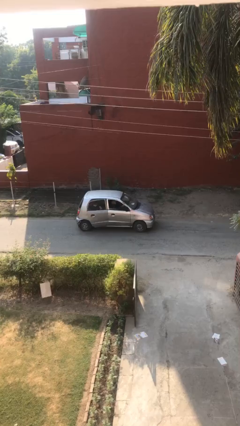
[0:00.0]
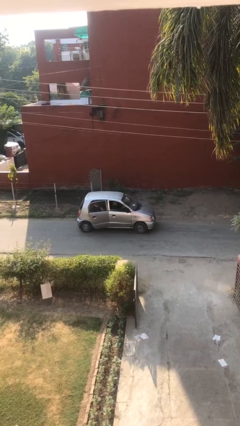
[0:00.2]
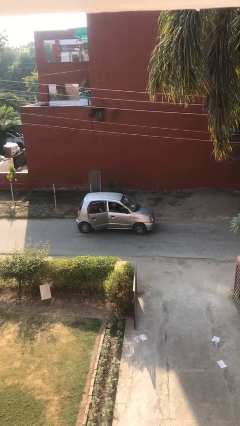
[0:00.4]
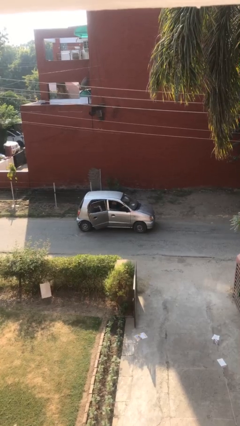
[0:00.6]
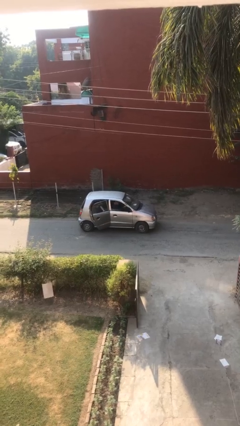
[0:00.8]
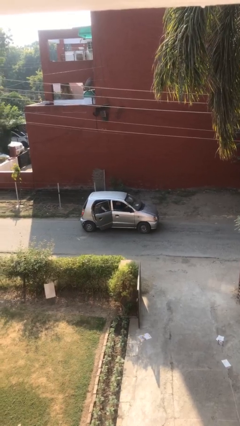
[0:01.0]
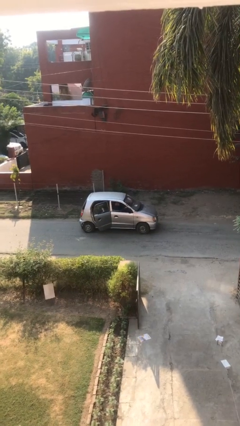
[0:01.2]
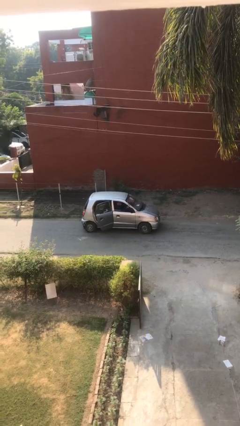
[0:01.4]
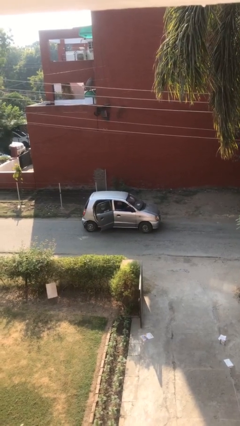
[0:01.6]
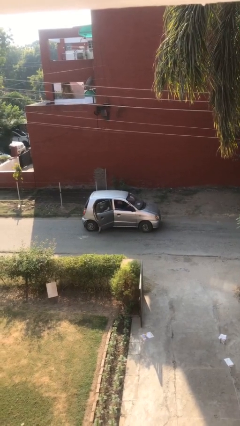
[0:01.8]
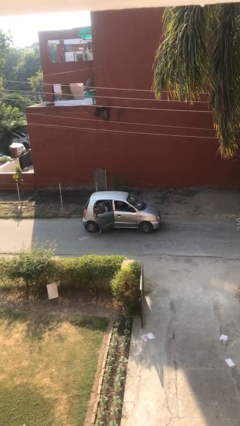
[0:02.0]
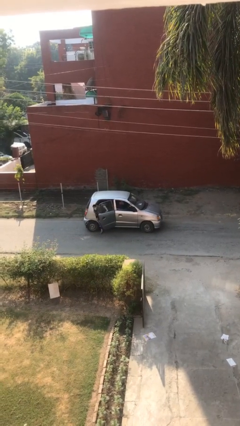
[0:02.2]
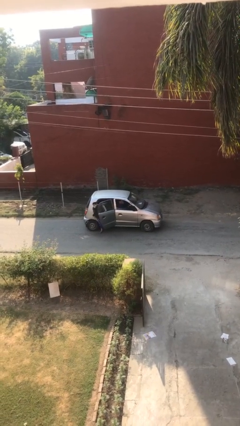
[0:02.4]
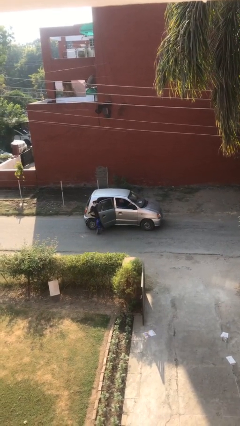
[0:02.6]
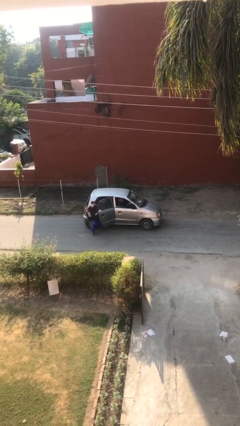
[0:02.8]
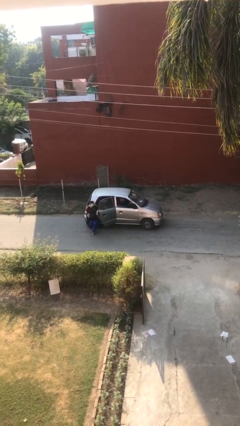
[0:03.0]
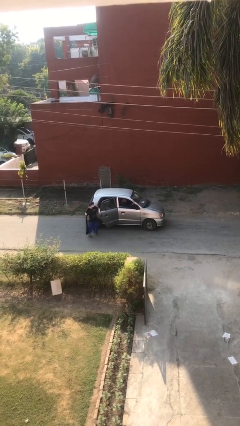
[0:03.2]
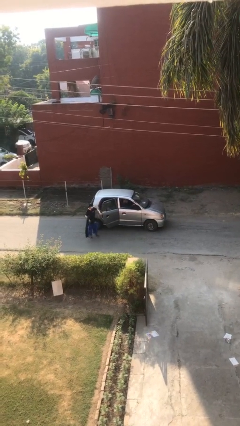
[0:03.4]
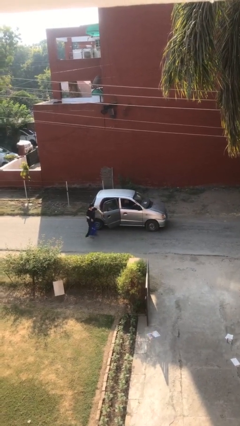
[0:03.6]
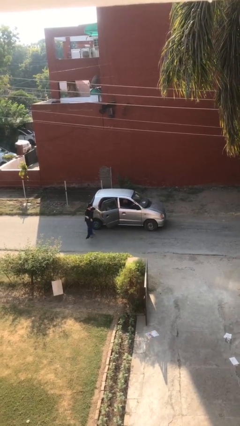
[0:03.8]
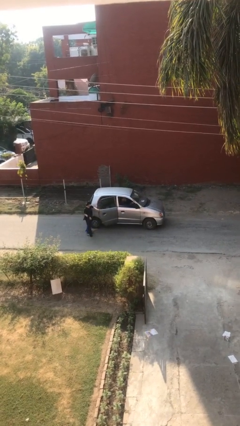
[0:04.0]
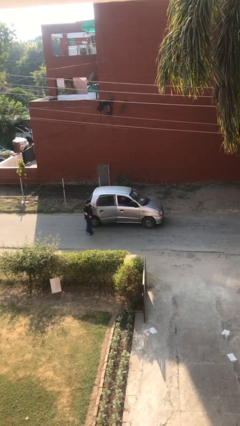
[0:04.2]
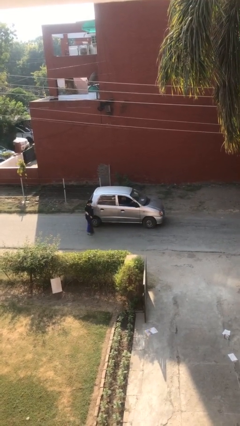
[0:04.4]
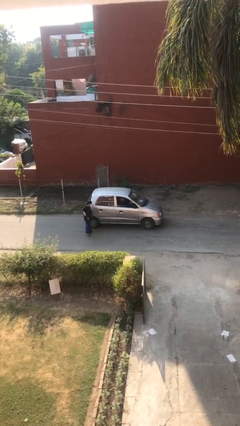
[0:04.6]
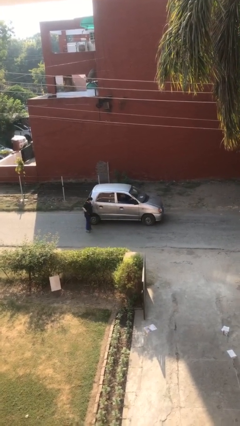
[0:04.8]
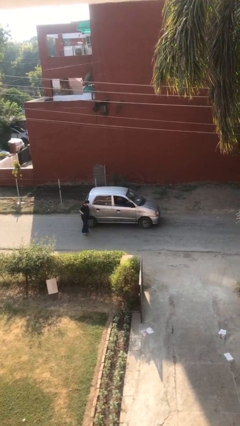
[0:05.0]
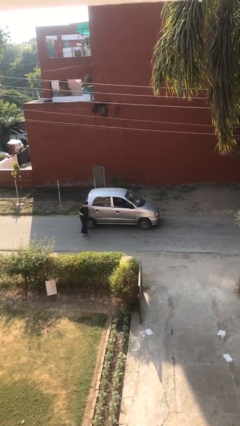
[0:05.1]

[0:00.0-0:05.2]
car drops off person

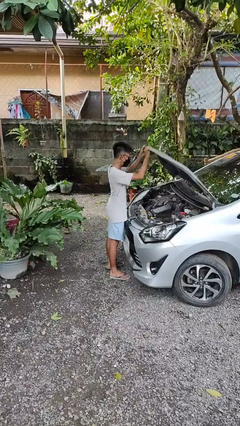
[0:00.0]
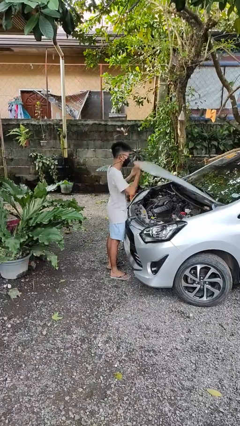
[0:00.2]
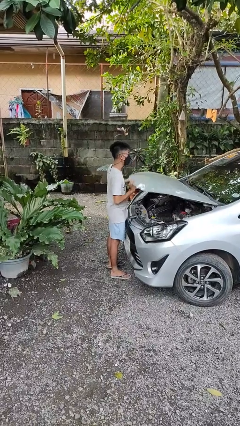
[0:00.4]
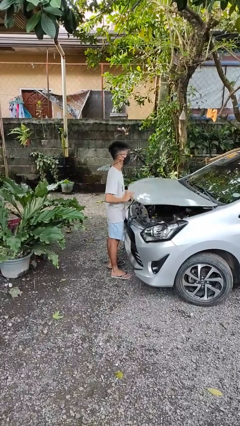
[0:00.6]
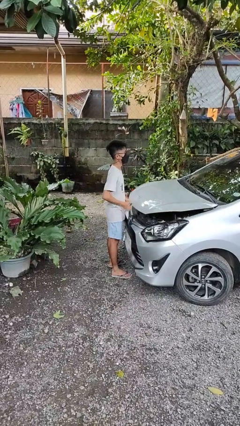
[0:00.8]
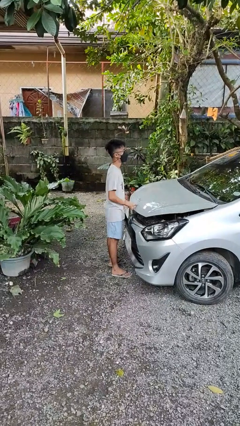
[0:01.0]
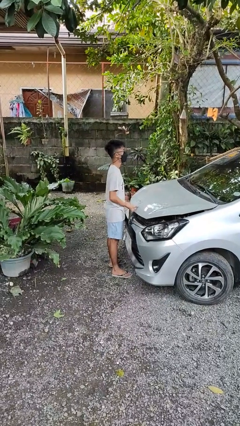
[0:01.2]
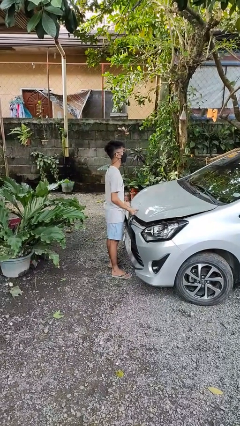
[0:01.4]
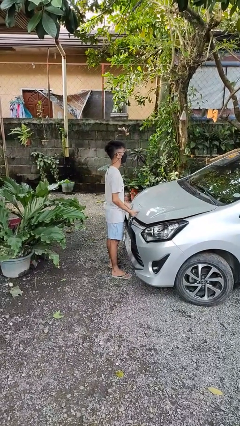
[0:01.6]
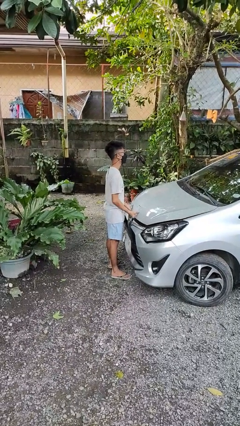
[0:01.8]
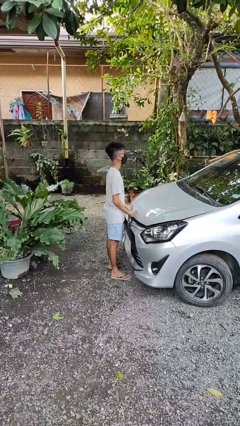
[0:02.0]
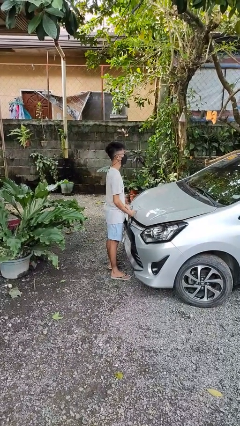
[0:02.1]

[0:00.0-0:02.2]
person closes car hood

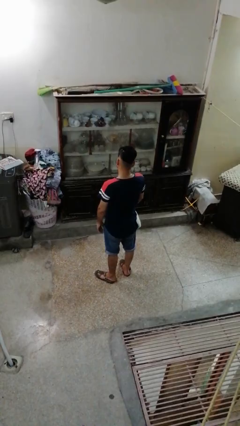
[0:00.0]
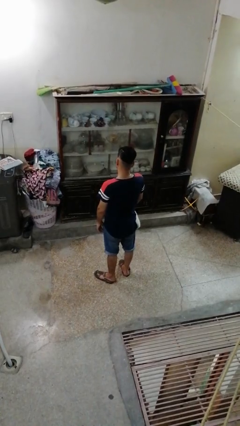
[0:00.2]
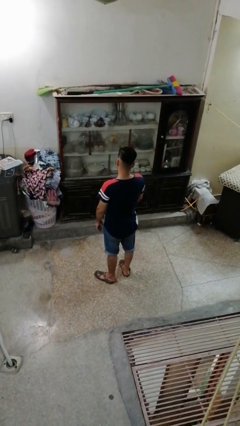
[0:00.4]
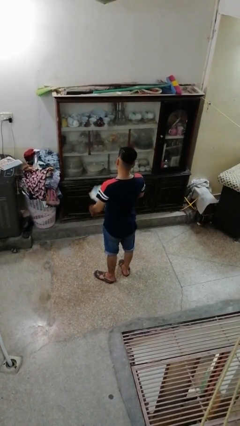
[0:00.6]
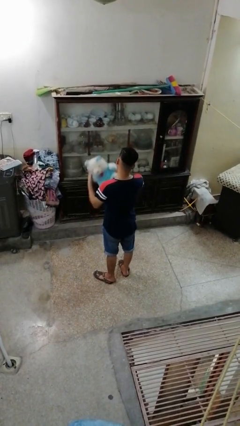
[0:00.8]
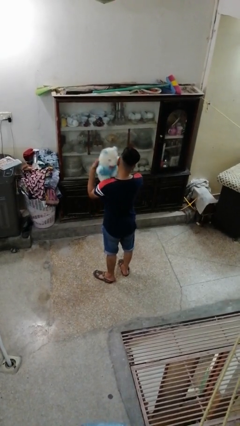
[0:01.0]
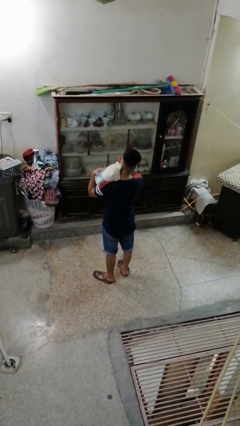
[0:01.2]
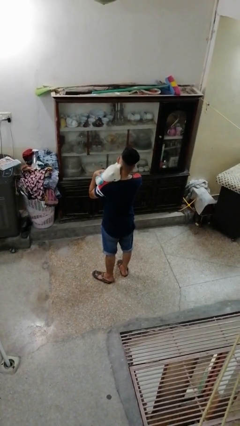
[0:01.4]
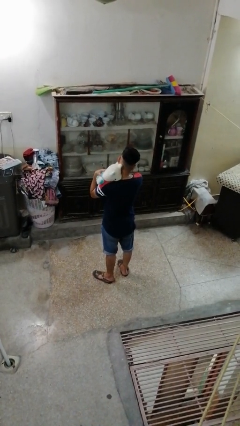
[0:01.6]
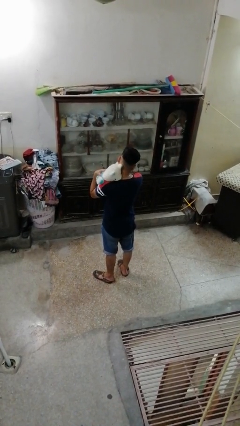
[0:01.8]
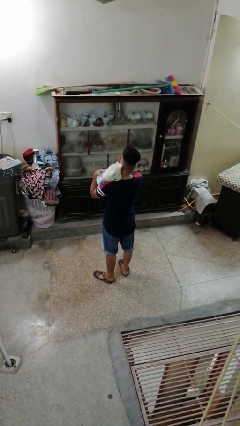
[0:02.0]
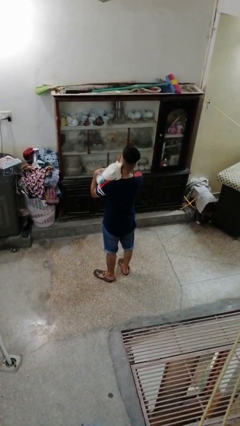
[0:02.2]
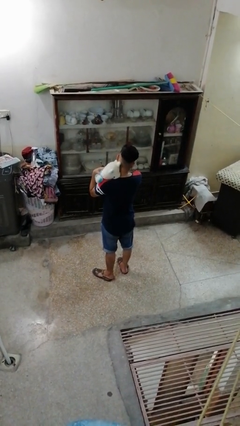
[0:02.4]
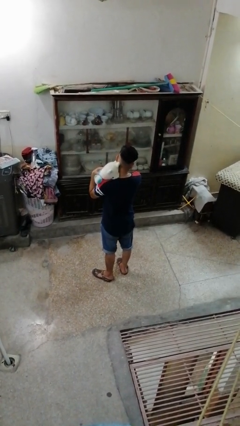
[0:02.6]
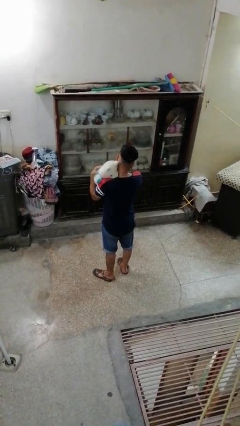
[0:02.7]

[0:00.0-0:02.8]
person hugs stuffed animal

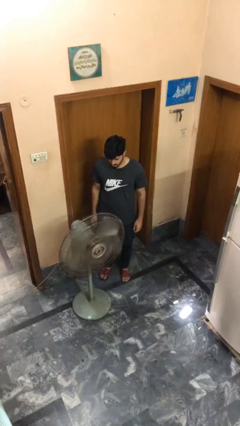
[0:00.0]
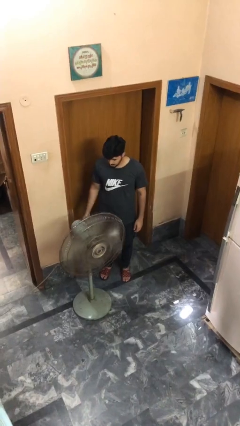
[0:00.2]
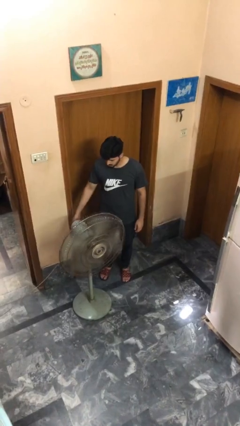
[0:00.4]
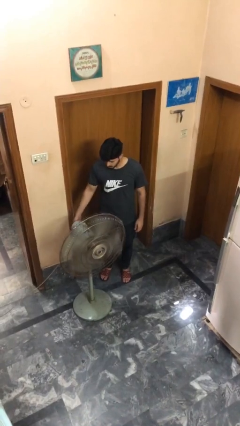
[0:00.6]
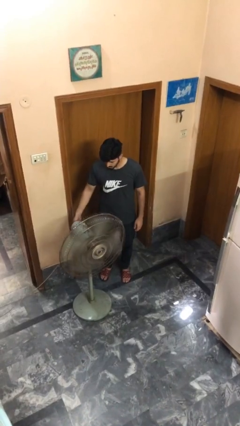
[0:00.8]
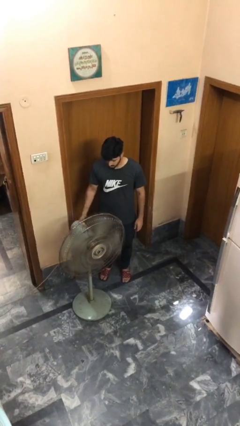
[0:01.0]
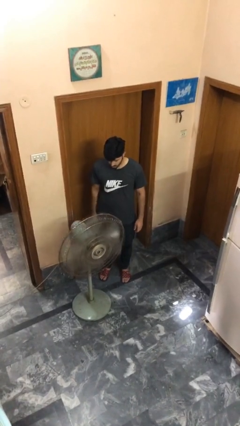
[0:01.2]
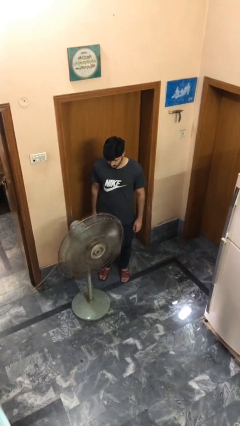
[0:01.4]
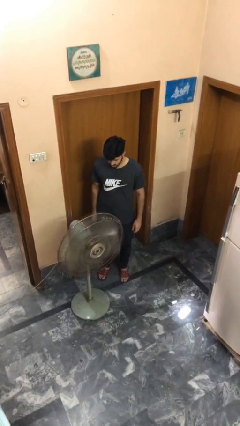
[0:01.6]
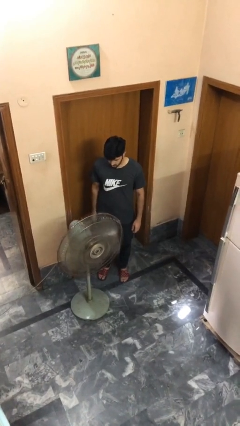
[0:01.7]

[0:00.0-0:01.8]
person turns on fan

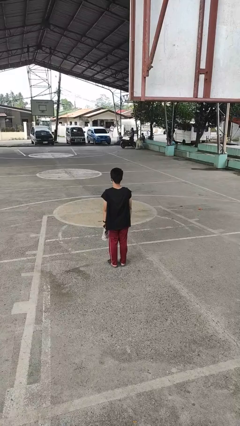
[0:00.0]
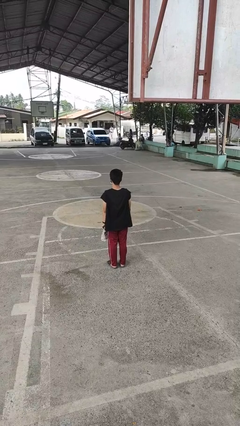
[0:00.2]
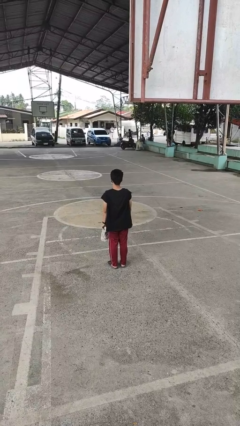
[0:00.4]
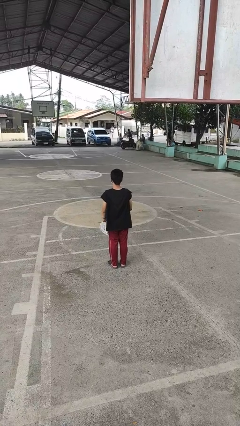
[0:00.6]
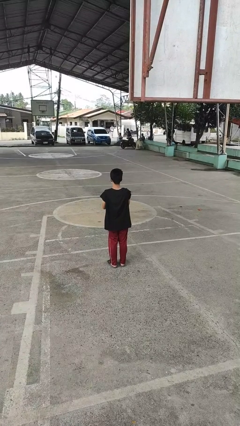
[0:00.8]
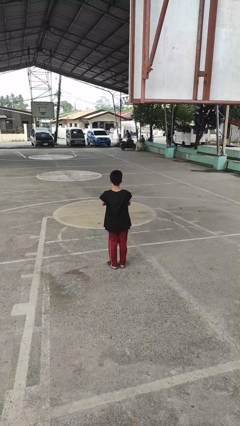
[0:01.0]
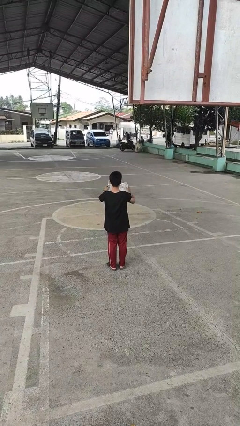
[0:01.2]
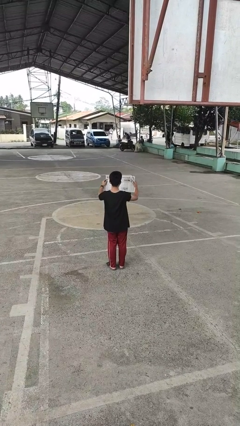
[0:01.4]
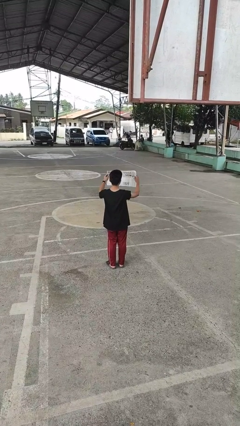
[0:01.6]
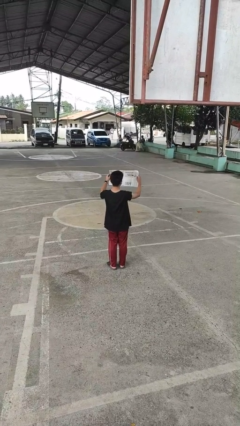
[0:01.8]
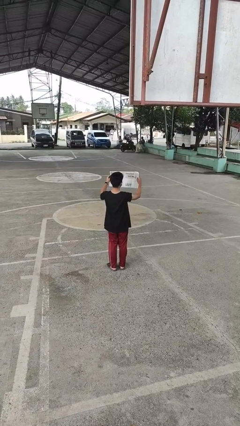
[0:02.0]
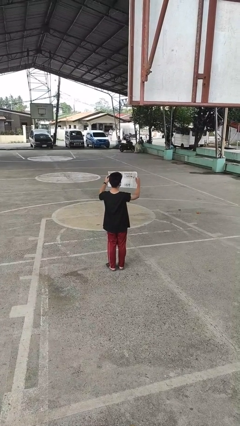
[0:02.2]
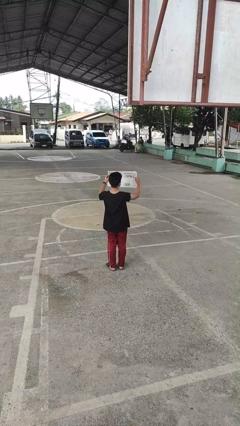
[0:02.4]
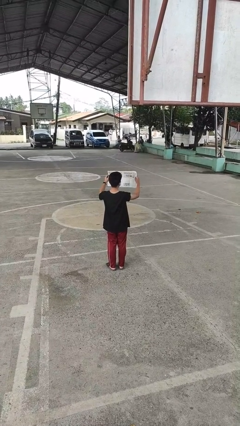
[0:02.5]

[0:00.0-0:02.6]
person reads newspaper

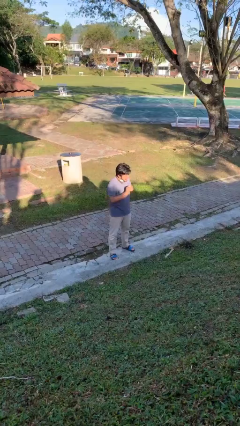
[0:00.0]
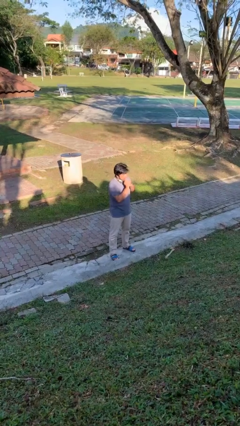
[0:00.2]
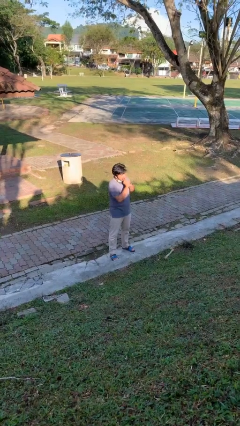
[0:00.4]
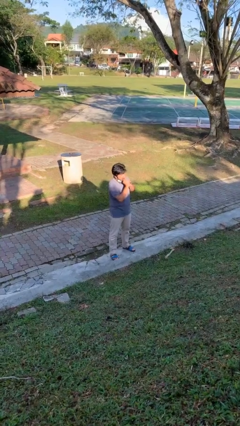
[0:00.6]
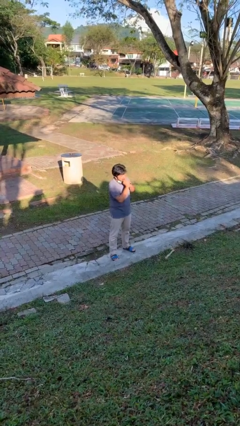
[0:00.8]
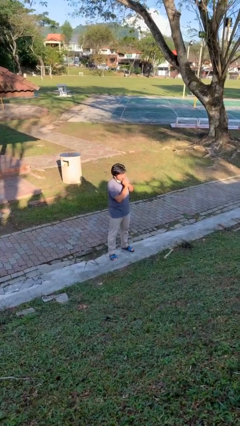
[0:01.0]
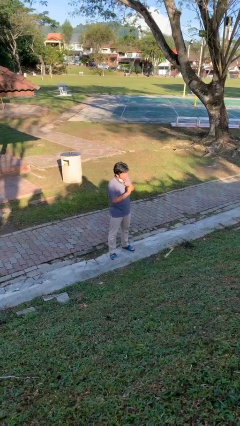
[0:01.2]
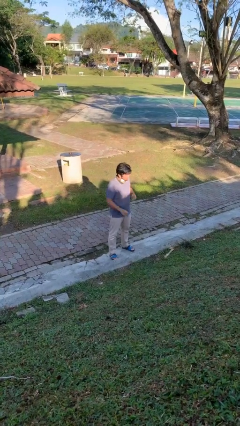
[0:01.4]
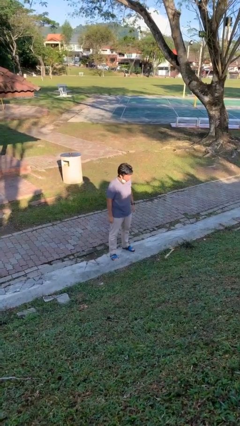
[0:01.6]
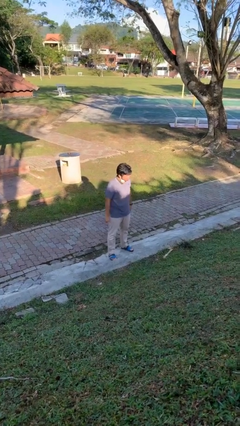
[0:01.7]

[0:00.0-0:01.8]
person flosses

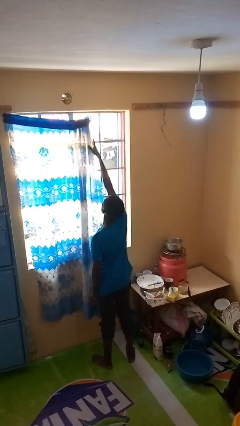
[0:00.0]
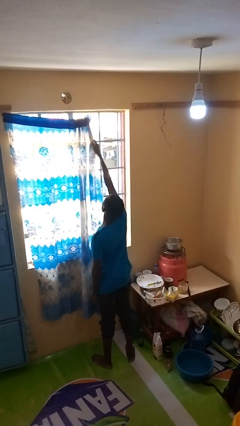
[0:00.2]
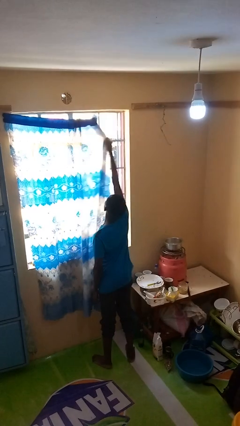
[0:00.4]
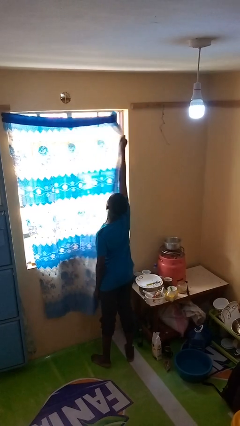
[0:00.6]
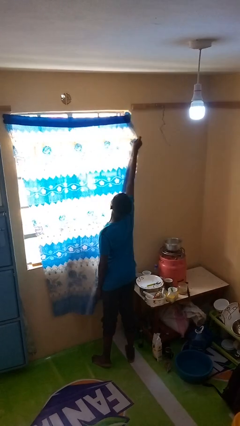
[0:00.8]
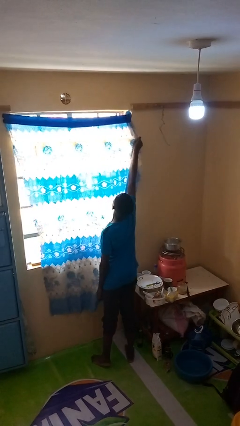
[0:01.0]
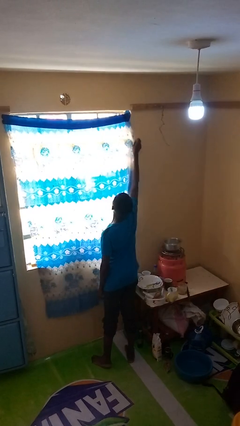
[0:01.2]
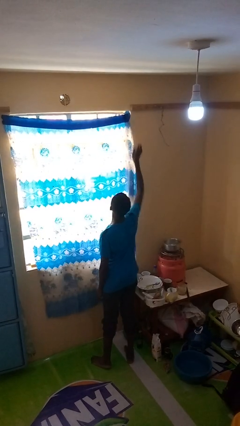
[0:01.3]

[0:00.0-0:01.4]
person closes curtains
